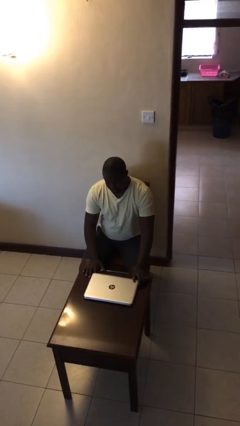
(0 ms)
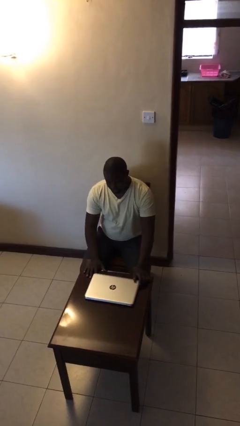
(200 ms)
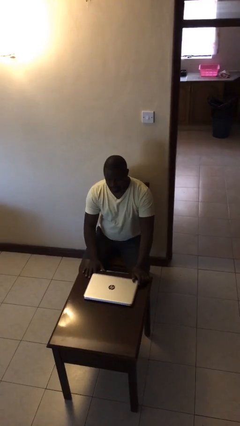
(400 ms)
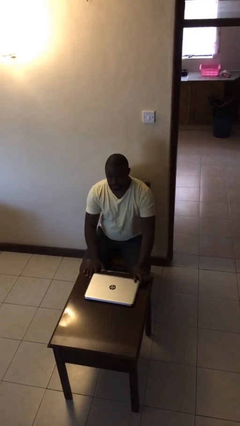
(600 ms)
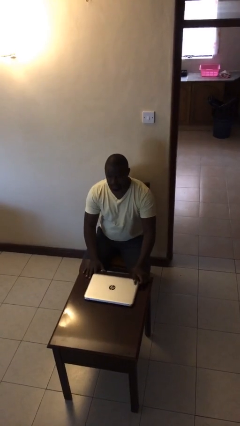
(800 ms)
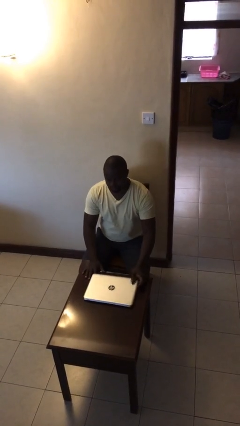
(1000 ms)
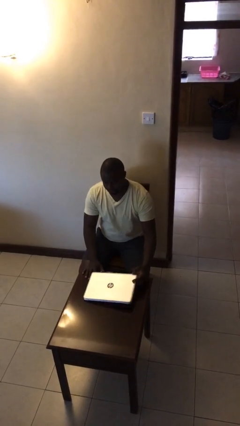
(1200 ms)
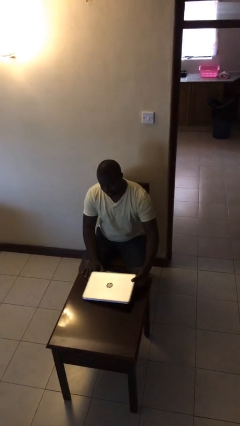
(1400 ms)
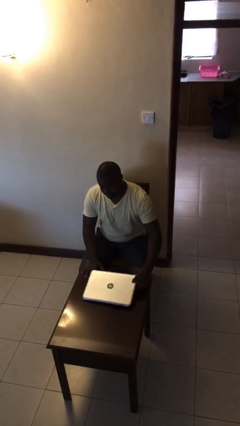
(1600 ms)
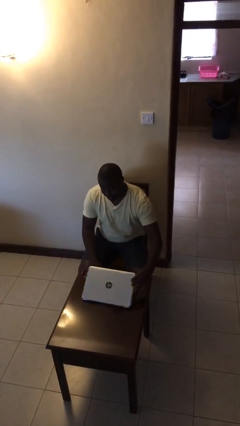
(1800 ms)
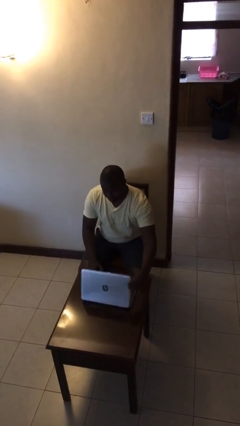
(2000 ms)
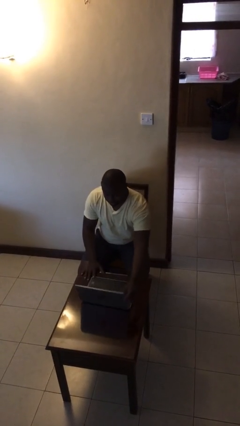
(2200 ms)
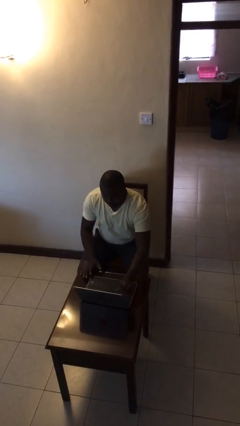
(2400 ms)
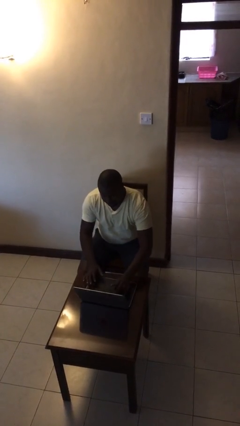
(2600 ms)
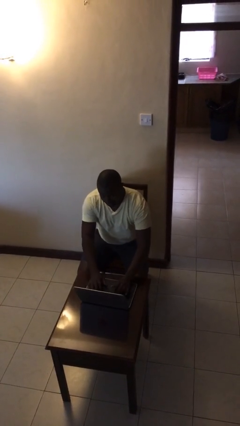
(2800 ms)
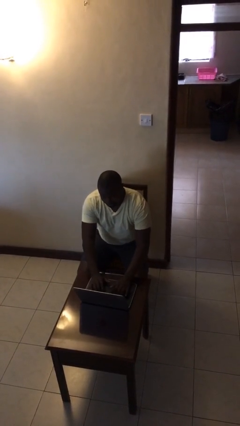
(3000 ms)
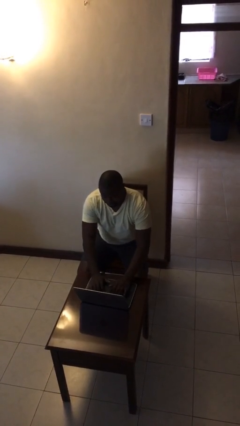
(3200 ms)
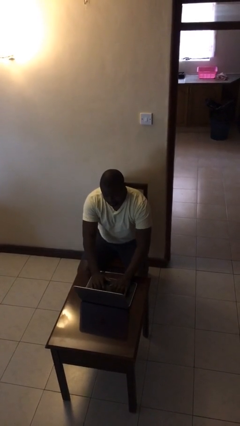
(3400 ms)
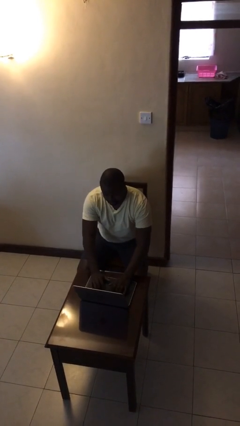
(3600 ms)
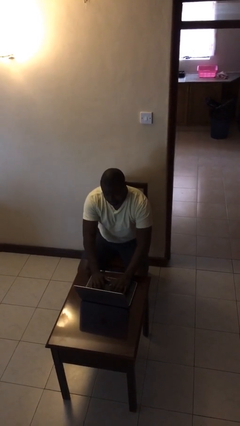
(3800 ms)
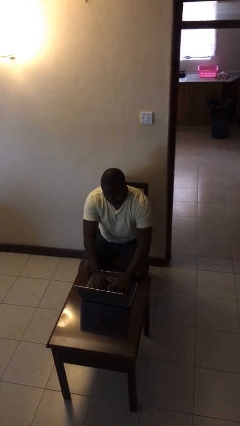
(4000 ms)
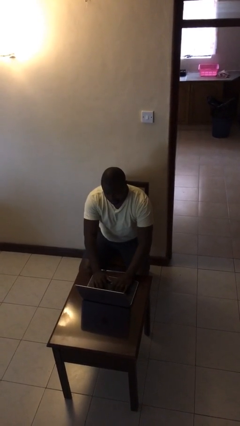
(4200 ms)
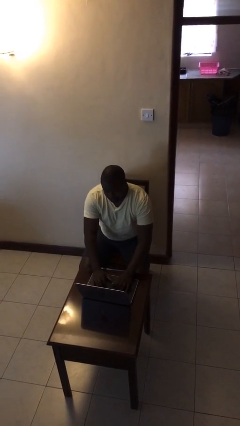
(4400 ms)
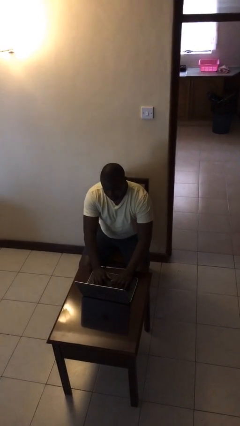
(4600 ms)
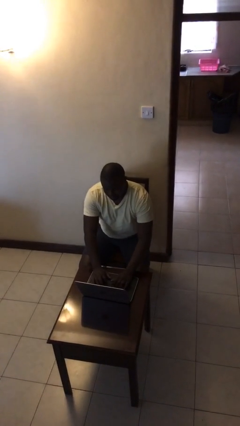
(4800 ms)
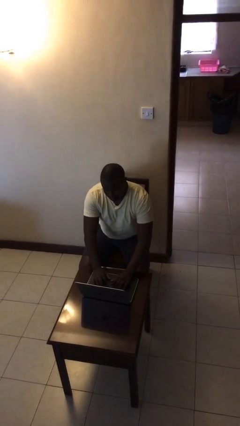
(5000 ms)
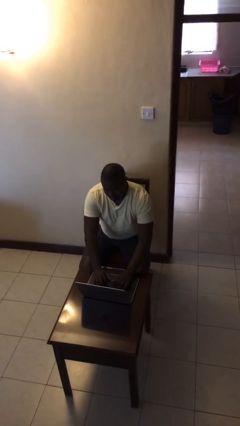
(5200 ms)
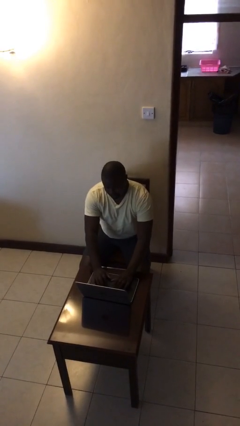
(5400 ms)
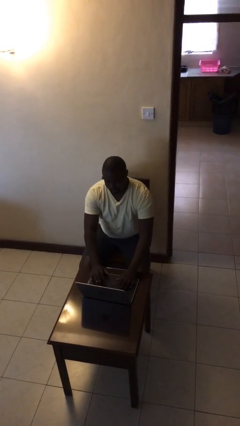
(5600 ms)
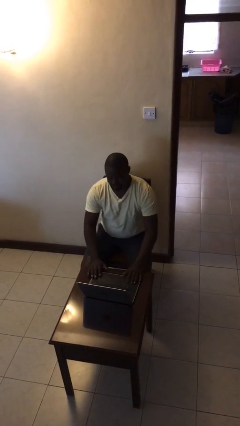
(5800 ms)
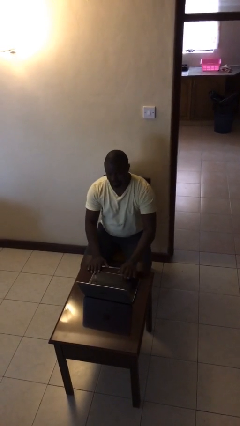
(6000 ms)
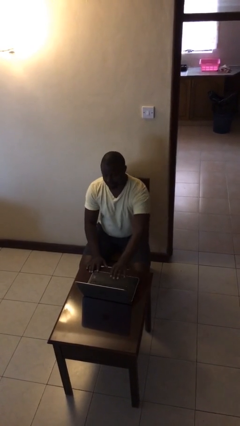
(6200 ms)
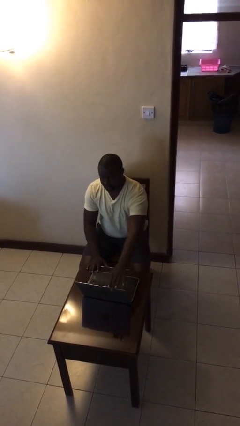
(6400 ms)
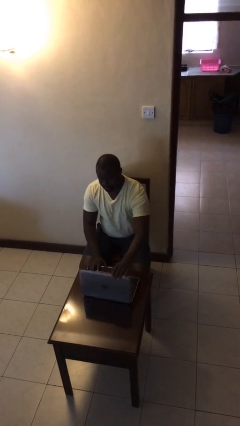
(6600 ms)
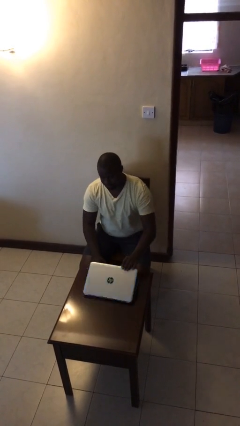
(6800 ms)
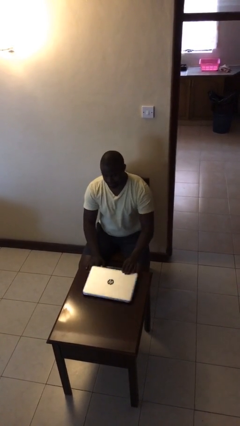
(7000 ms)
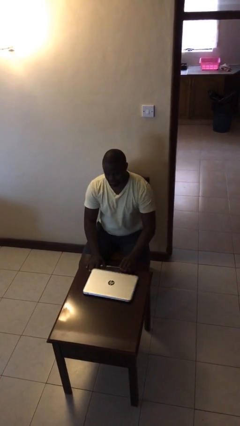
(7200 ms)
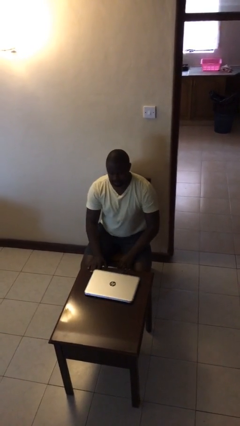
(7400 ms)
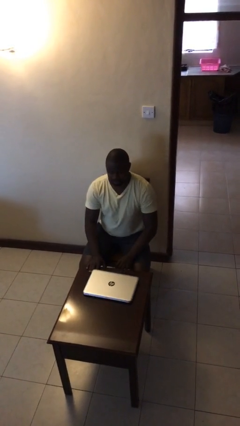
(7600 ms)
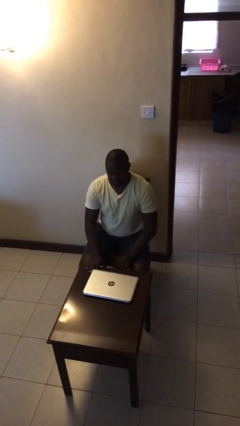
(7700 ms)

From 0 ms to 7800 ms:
person interacts with laptop

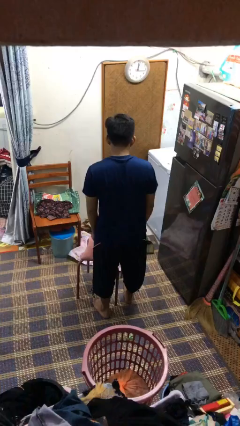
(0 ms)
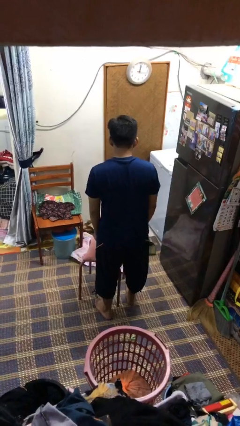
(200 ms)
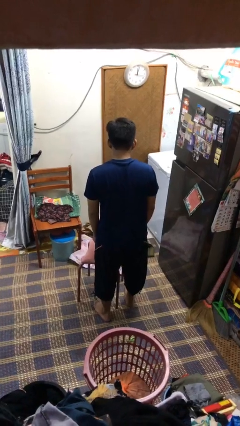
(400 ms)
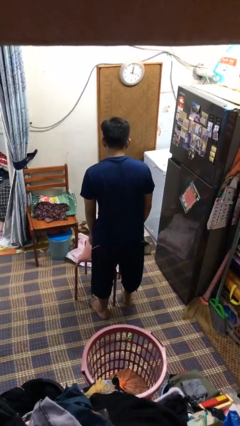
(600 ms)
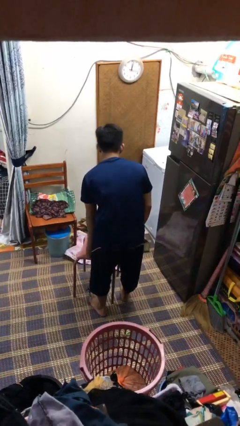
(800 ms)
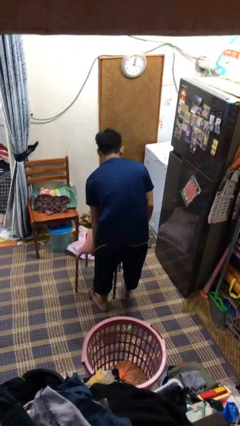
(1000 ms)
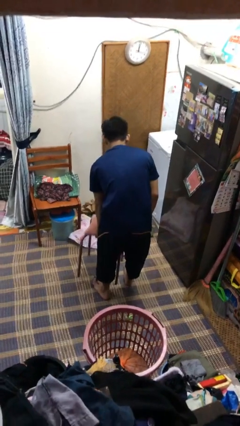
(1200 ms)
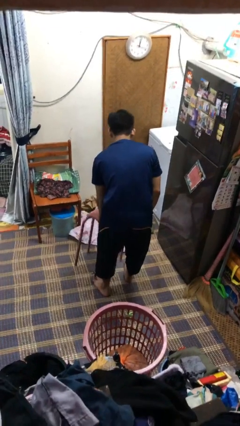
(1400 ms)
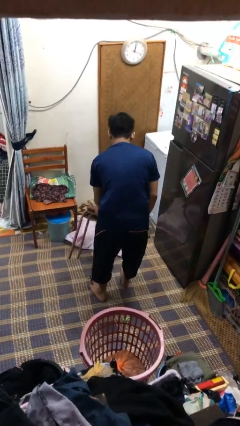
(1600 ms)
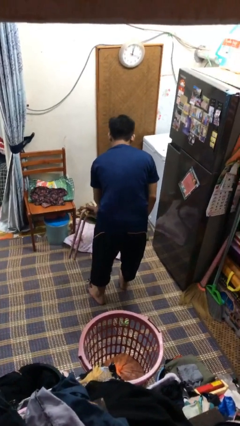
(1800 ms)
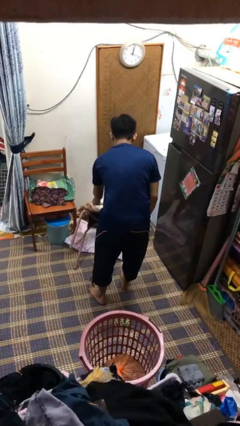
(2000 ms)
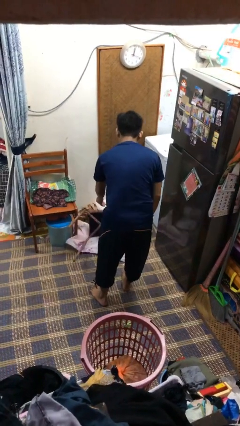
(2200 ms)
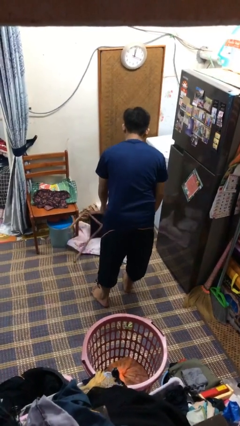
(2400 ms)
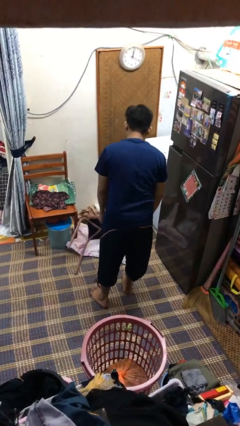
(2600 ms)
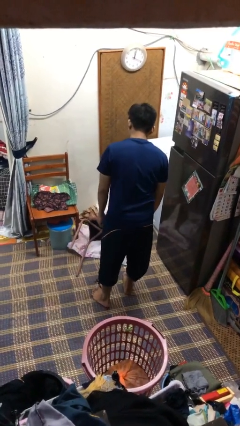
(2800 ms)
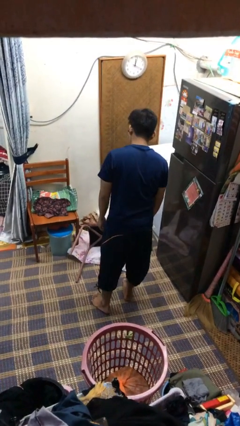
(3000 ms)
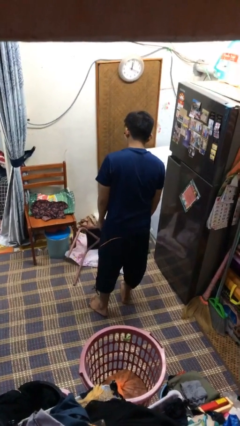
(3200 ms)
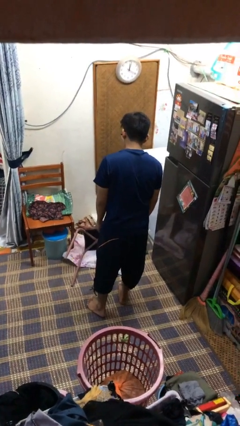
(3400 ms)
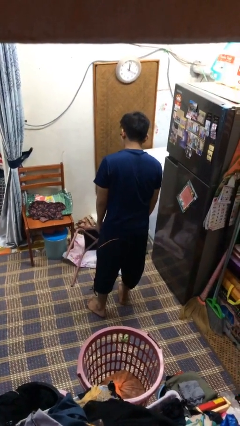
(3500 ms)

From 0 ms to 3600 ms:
person knocks over furniture

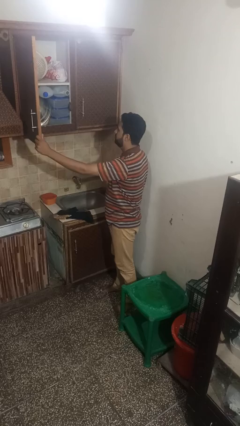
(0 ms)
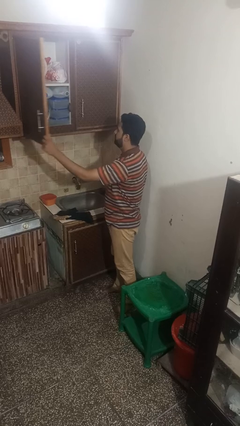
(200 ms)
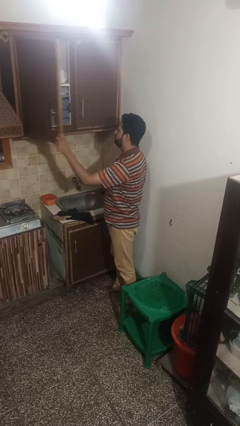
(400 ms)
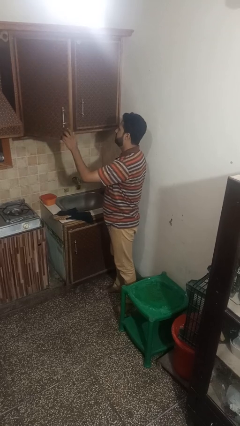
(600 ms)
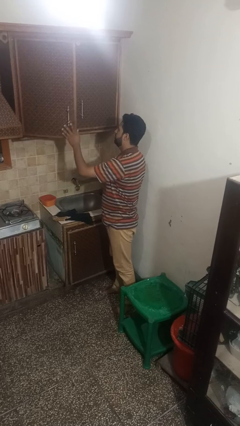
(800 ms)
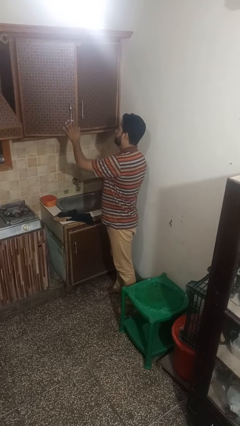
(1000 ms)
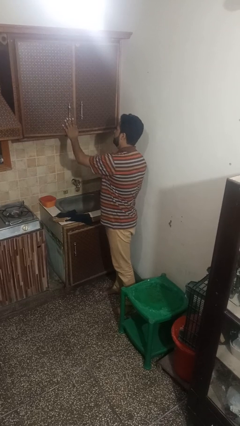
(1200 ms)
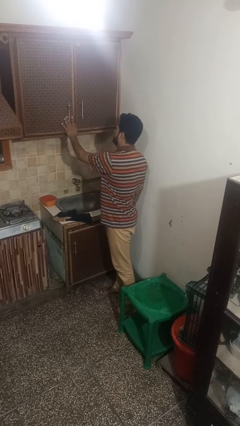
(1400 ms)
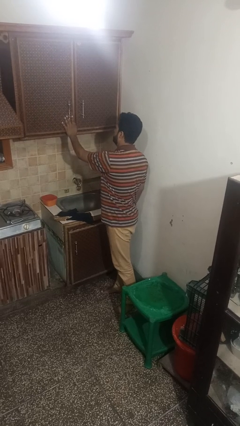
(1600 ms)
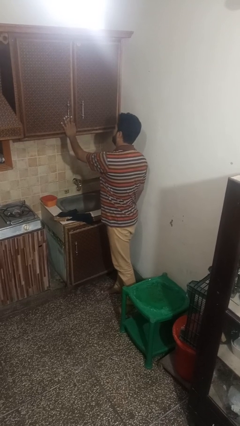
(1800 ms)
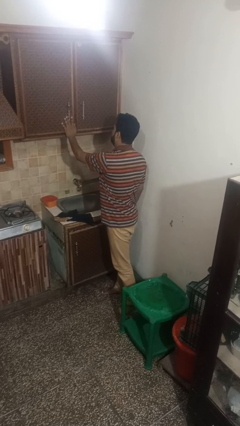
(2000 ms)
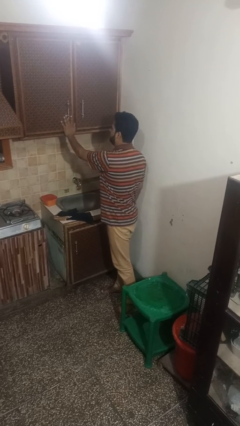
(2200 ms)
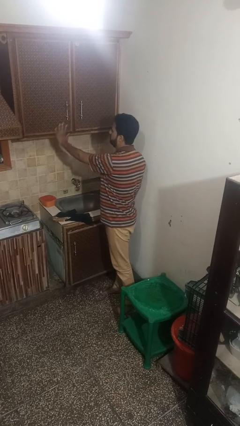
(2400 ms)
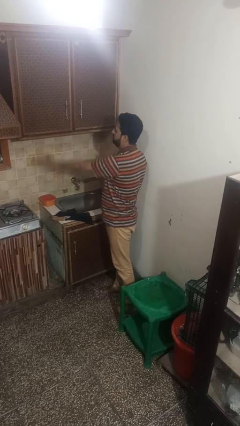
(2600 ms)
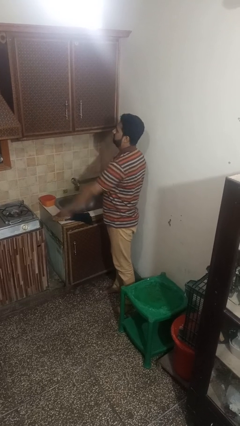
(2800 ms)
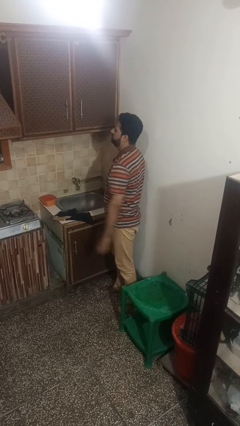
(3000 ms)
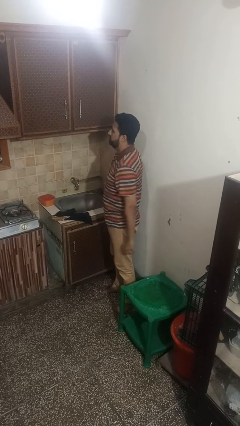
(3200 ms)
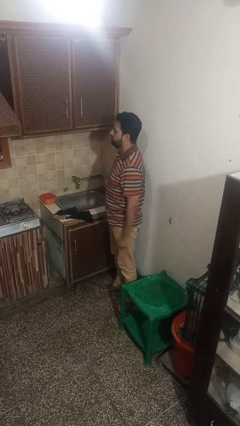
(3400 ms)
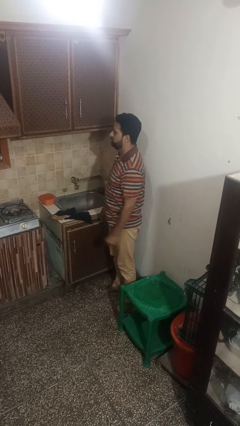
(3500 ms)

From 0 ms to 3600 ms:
person closes cabinet

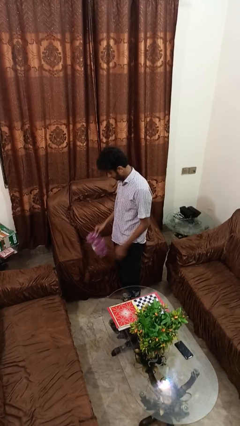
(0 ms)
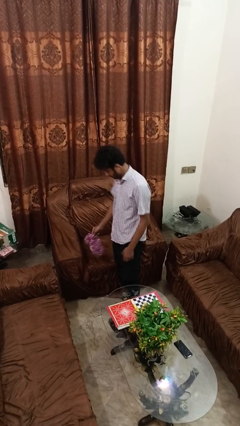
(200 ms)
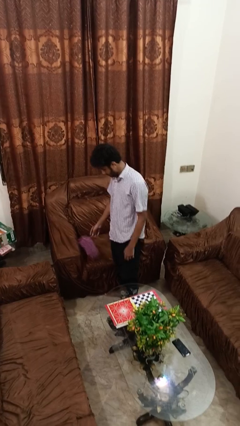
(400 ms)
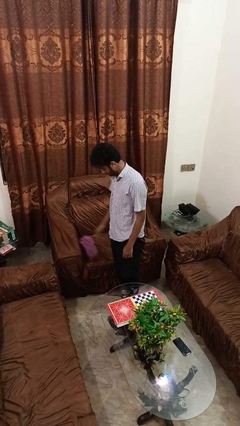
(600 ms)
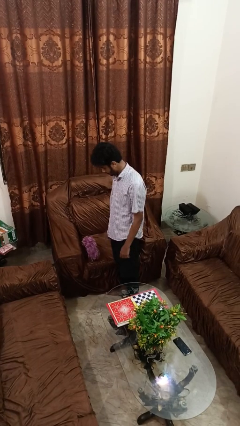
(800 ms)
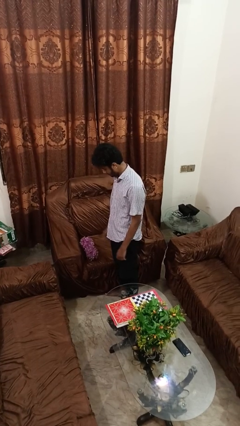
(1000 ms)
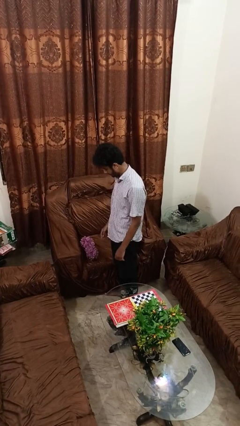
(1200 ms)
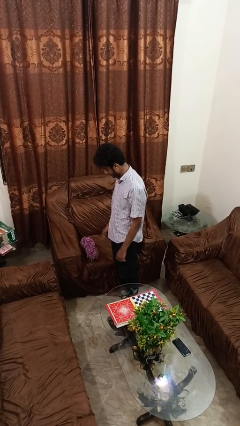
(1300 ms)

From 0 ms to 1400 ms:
person puts down object on couch

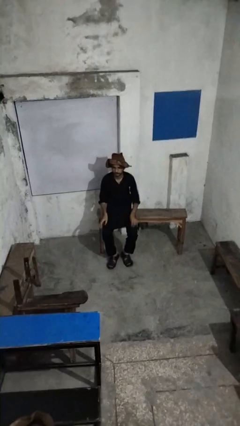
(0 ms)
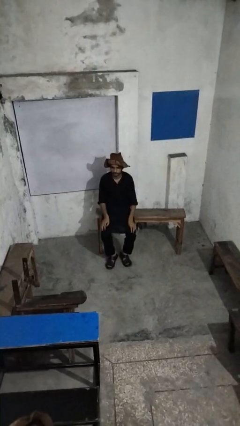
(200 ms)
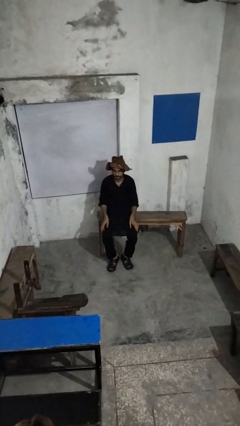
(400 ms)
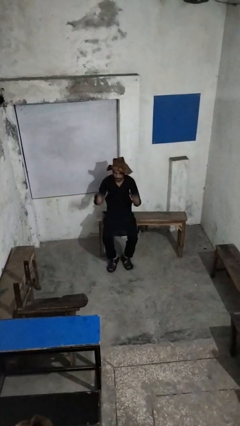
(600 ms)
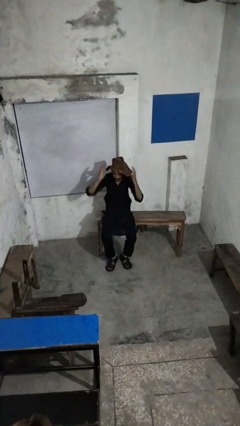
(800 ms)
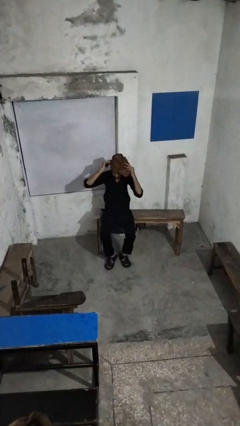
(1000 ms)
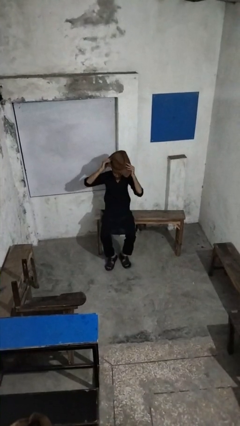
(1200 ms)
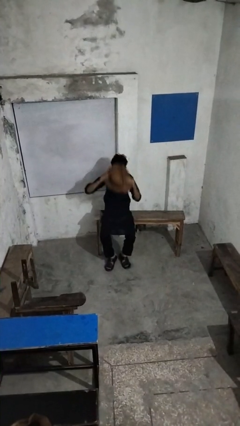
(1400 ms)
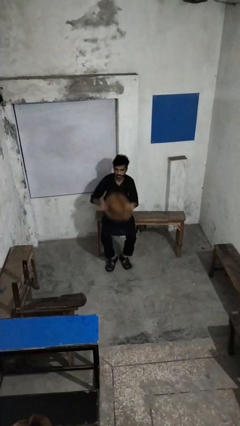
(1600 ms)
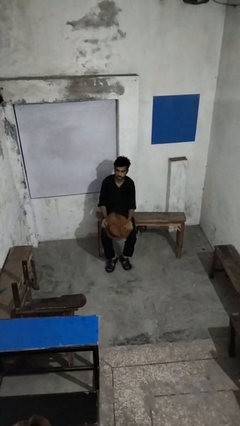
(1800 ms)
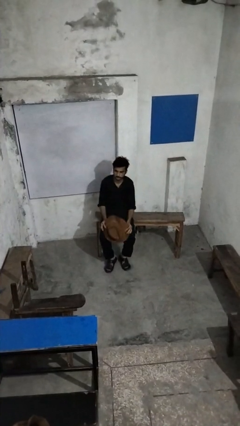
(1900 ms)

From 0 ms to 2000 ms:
person takes off hat
